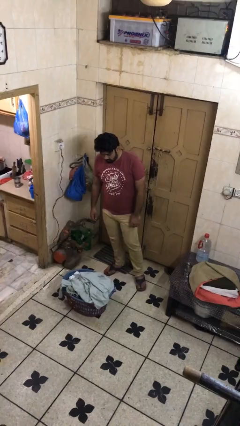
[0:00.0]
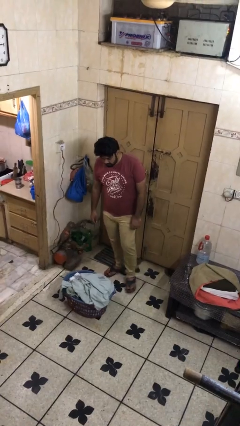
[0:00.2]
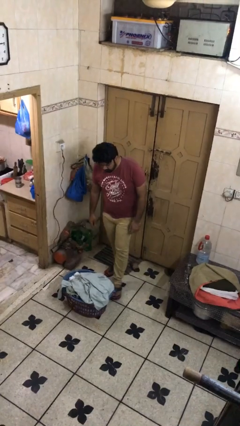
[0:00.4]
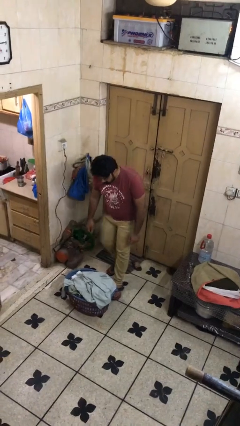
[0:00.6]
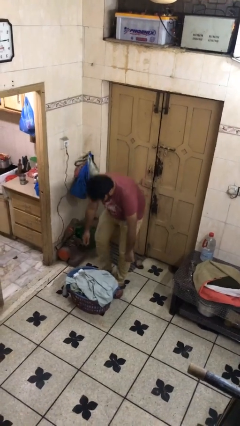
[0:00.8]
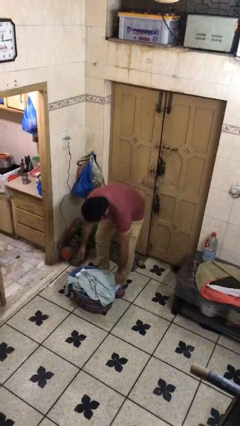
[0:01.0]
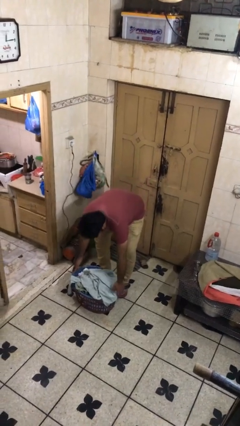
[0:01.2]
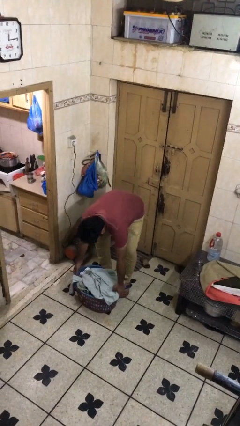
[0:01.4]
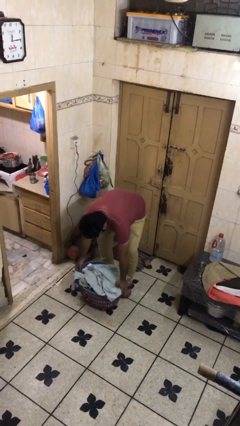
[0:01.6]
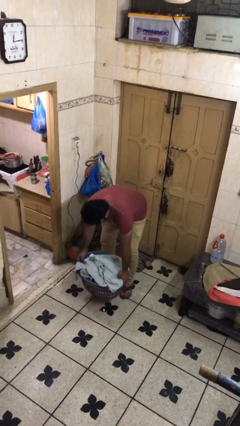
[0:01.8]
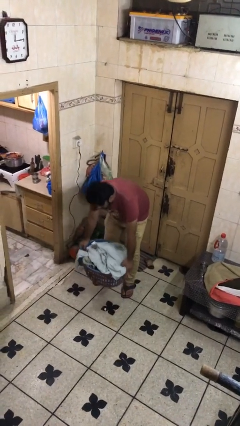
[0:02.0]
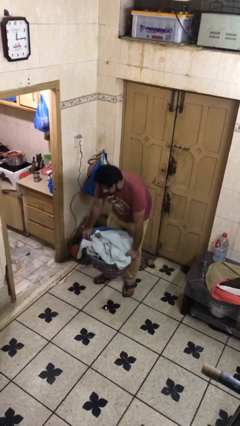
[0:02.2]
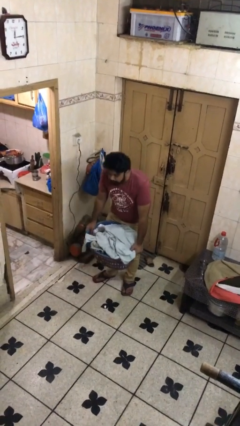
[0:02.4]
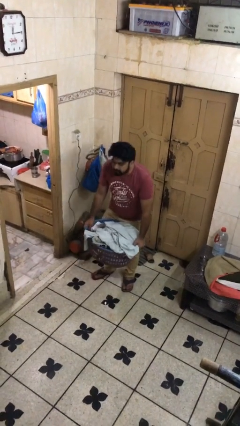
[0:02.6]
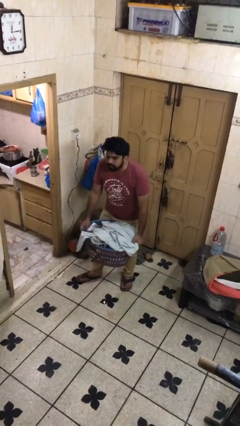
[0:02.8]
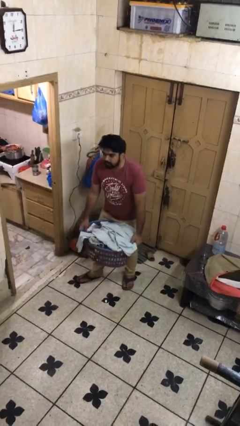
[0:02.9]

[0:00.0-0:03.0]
person picks up object from floor

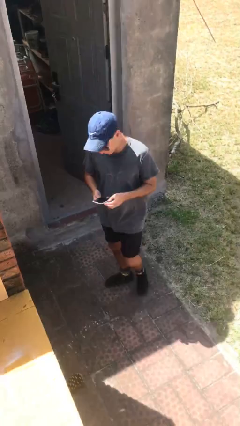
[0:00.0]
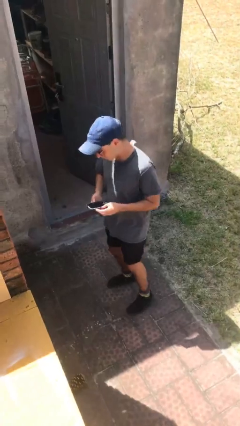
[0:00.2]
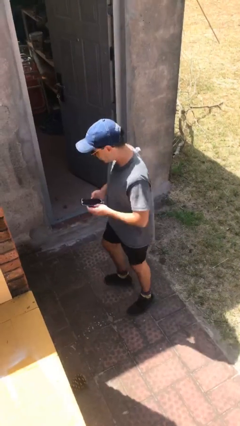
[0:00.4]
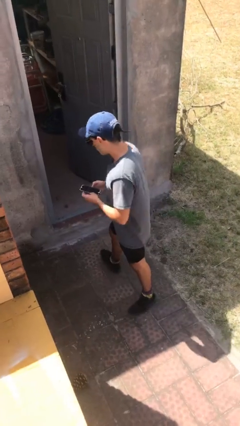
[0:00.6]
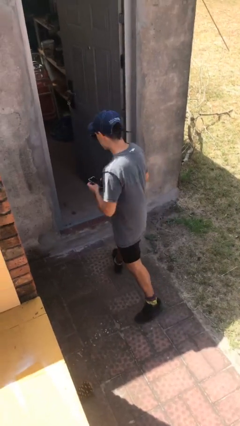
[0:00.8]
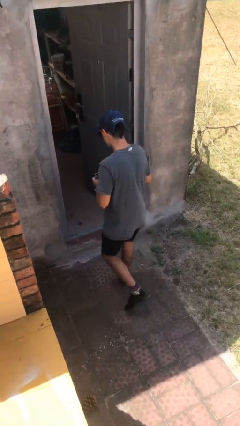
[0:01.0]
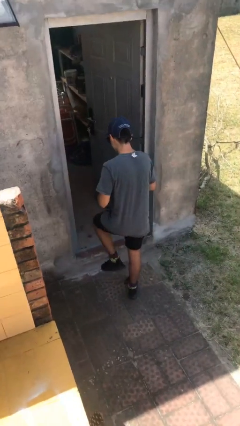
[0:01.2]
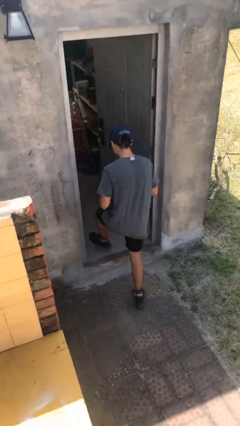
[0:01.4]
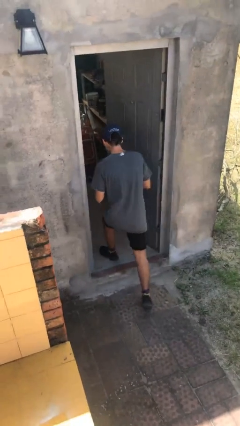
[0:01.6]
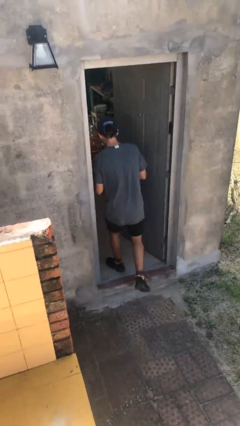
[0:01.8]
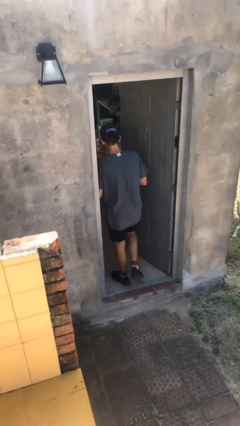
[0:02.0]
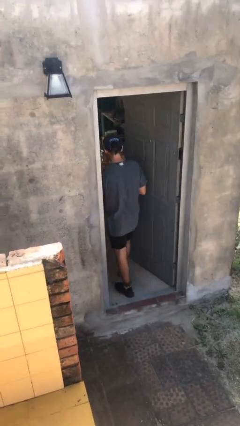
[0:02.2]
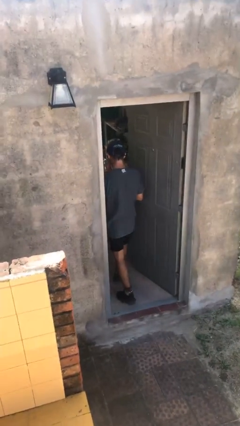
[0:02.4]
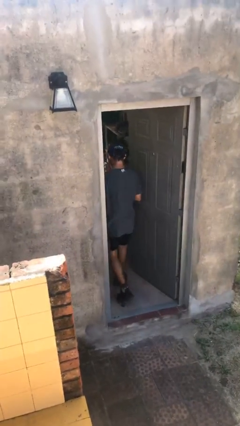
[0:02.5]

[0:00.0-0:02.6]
person exits scene through structure

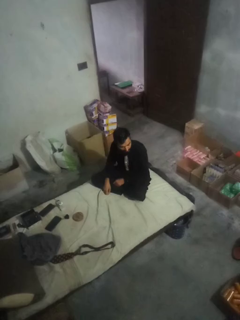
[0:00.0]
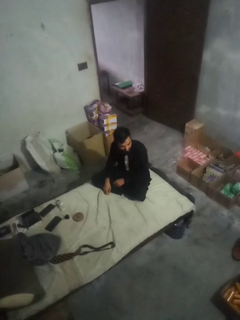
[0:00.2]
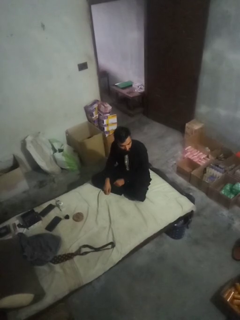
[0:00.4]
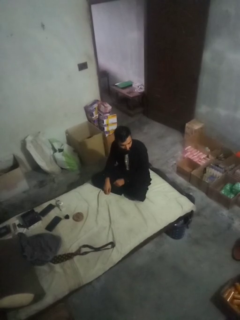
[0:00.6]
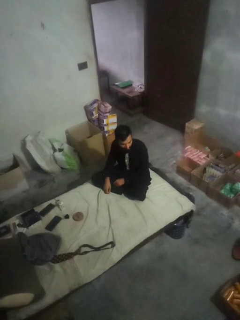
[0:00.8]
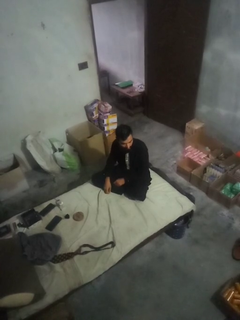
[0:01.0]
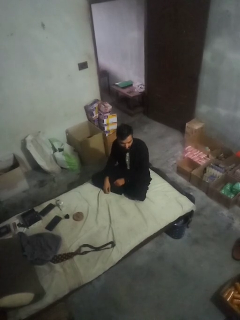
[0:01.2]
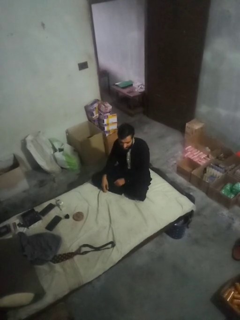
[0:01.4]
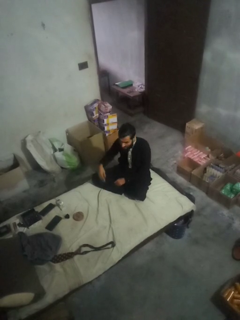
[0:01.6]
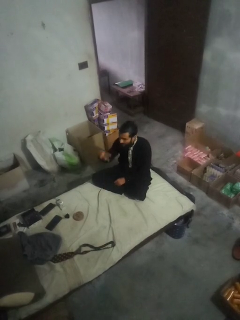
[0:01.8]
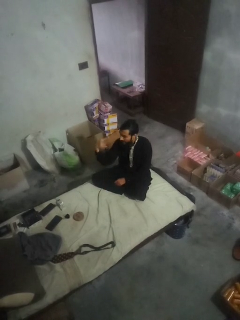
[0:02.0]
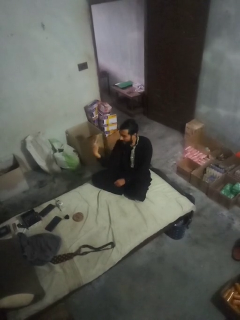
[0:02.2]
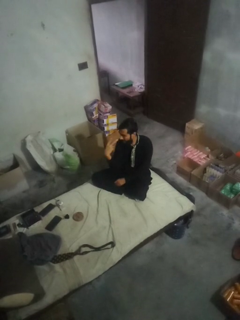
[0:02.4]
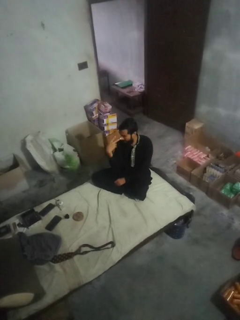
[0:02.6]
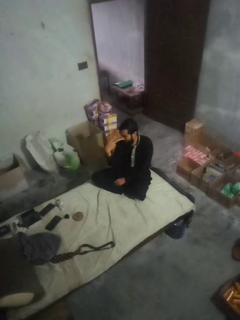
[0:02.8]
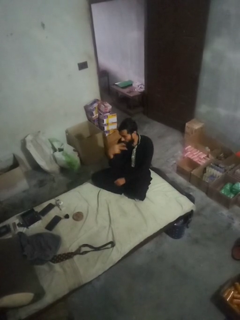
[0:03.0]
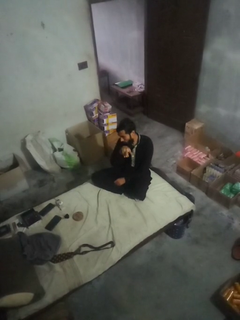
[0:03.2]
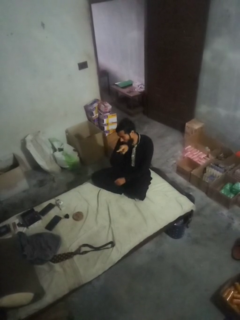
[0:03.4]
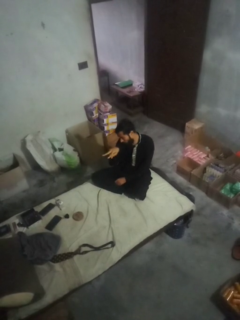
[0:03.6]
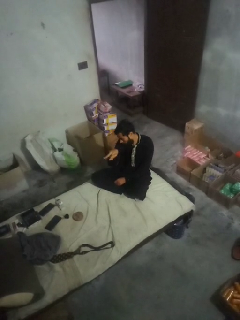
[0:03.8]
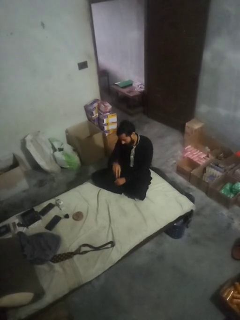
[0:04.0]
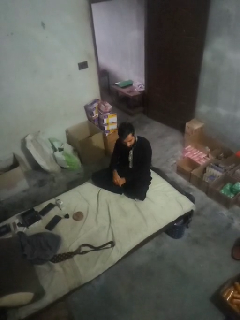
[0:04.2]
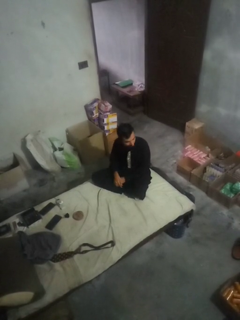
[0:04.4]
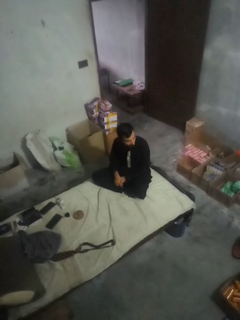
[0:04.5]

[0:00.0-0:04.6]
person gestures watch closely

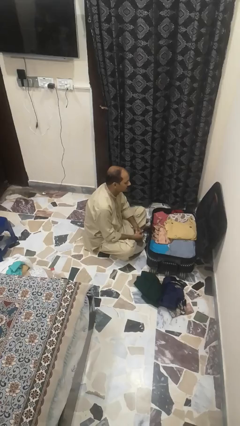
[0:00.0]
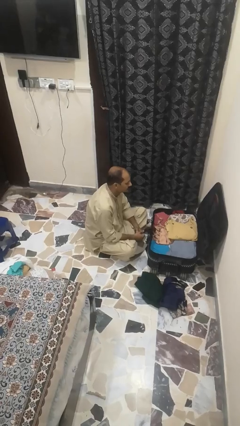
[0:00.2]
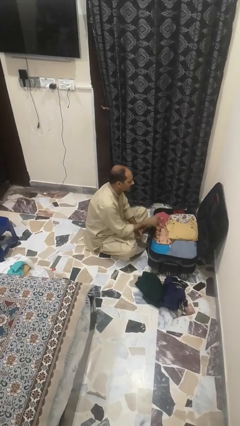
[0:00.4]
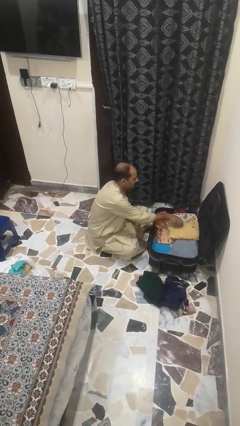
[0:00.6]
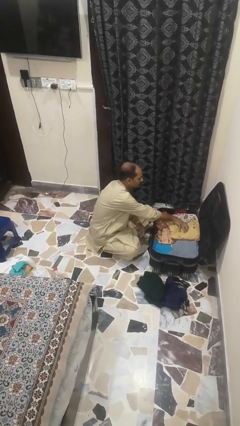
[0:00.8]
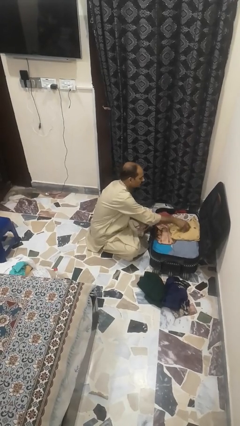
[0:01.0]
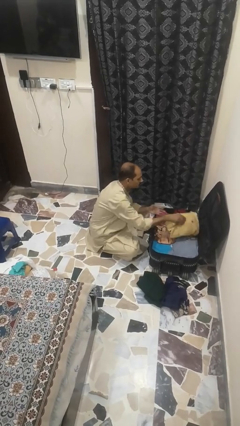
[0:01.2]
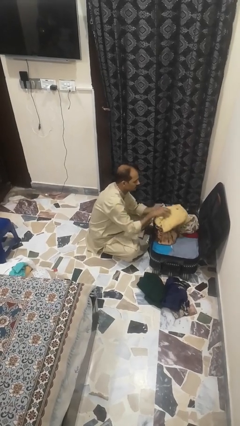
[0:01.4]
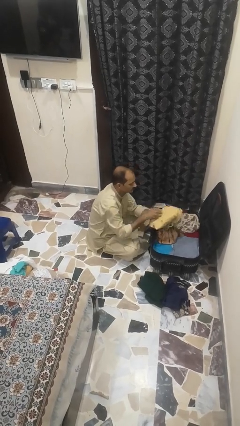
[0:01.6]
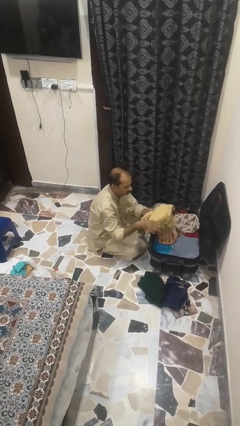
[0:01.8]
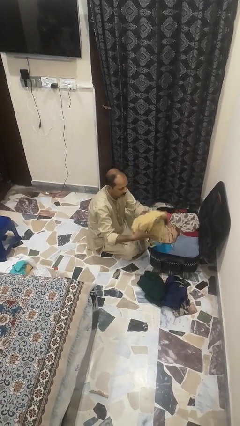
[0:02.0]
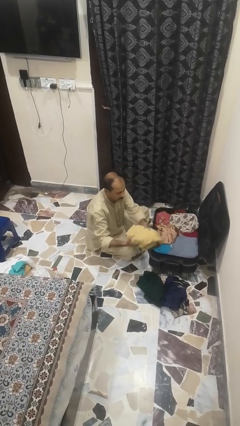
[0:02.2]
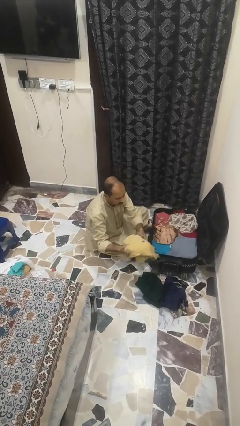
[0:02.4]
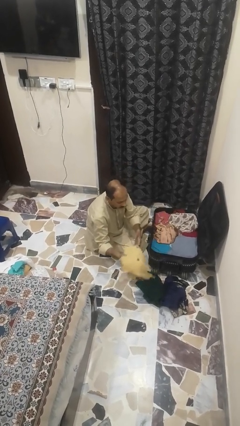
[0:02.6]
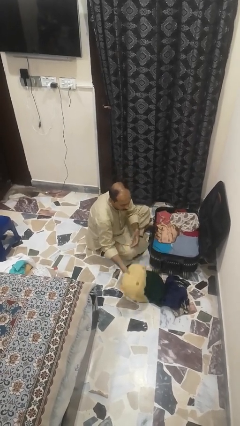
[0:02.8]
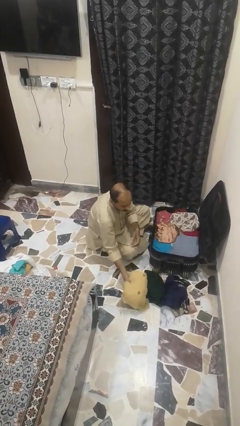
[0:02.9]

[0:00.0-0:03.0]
person unloads clothes from suitcase

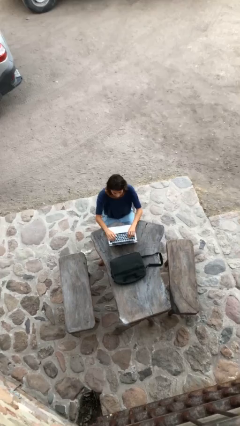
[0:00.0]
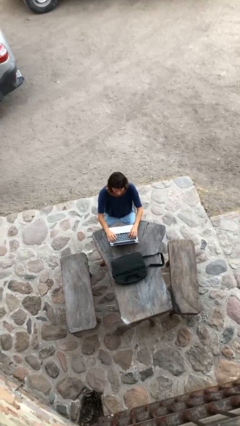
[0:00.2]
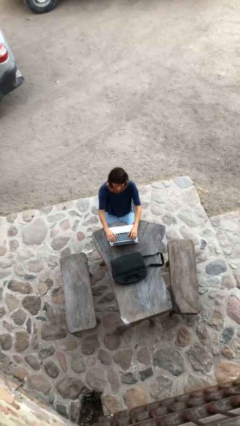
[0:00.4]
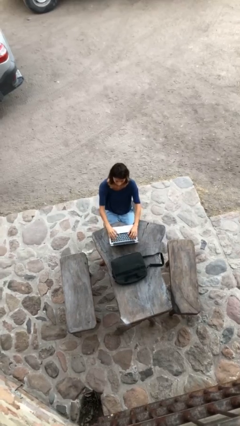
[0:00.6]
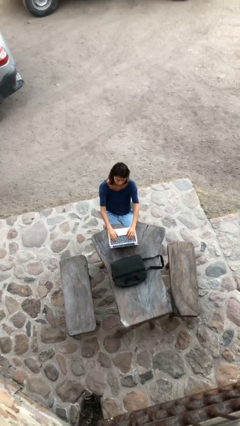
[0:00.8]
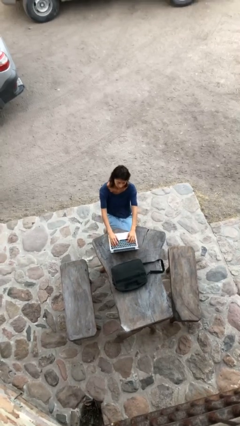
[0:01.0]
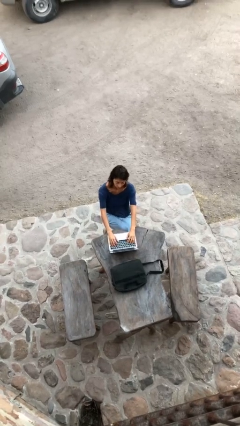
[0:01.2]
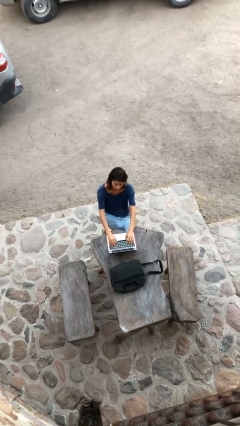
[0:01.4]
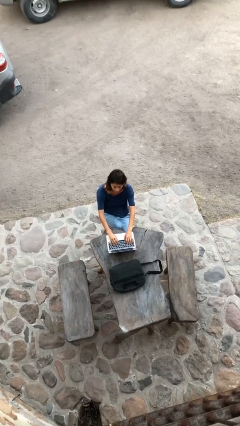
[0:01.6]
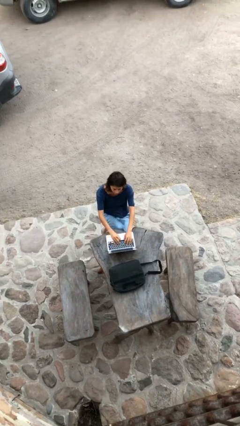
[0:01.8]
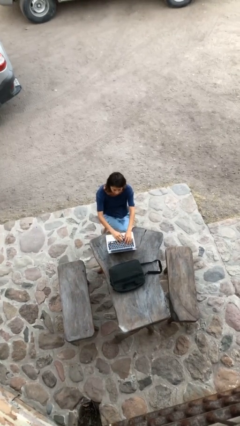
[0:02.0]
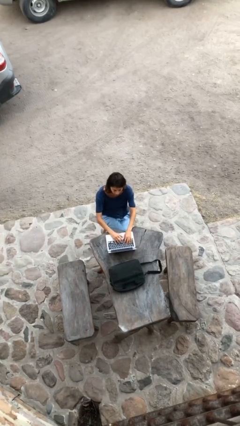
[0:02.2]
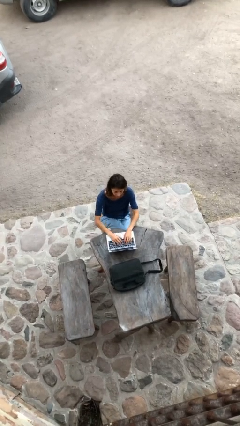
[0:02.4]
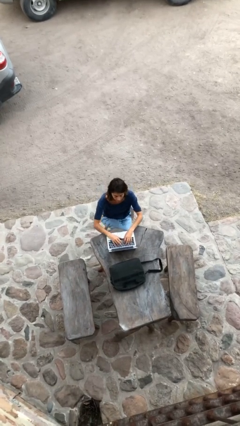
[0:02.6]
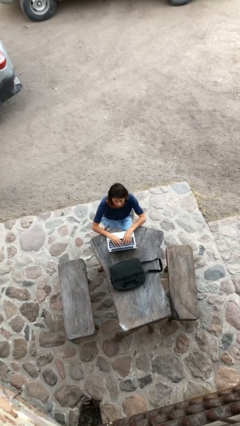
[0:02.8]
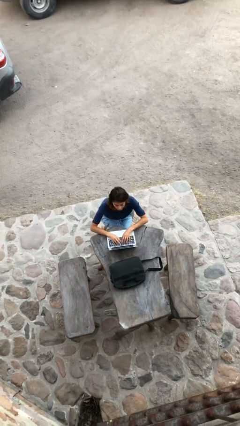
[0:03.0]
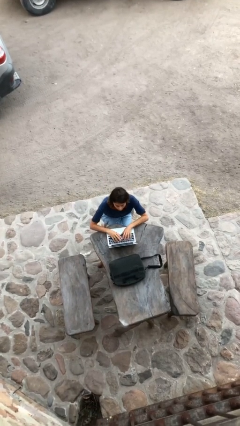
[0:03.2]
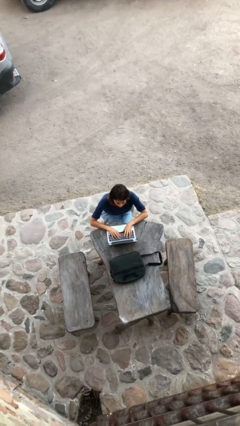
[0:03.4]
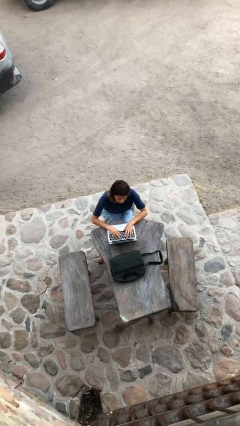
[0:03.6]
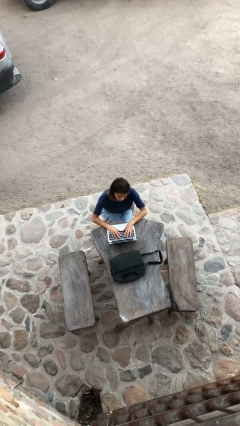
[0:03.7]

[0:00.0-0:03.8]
person interacts with laptop

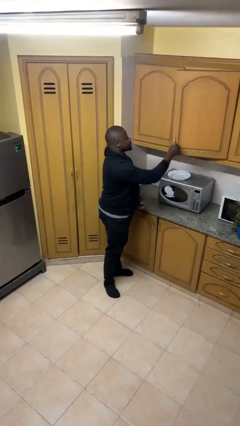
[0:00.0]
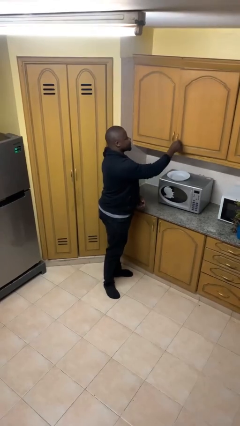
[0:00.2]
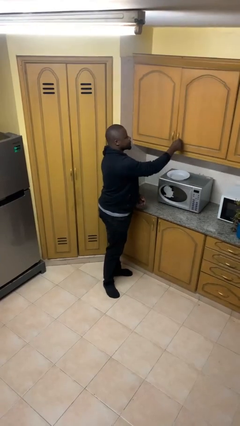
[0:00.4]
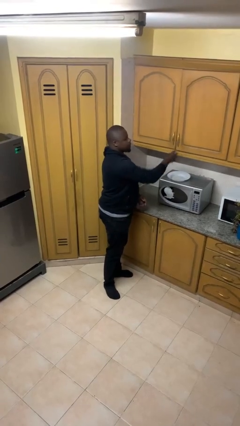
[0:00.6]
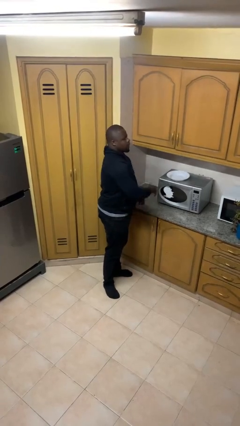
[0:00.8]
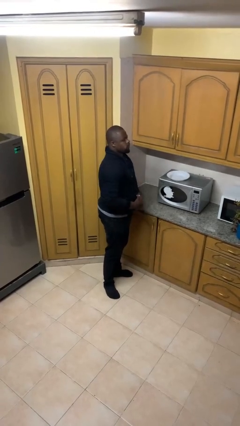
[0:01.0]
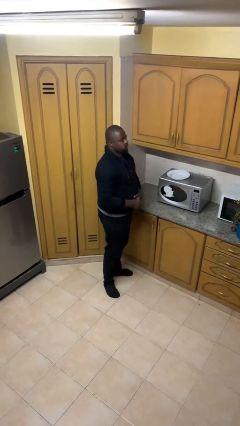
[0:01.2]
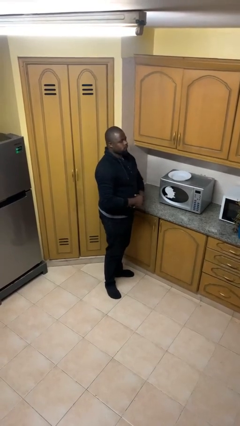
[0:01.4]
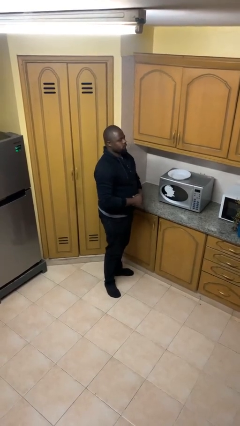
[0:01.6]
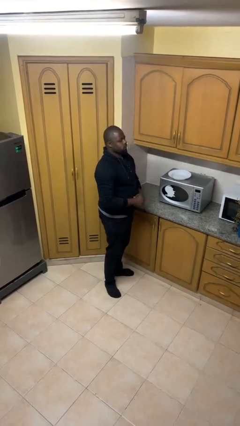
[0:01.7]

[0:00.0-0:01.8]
person closes cabinet
